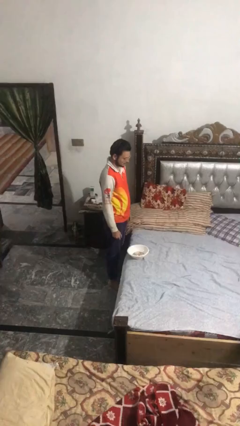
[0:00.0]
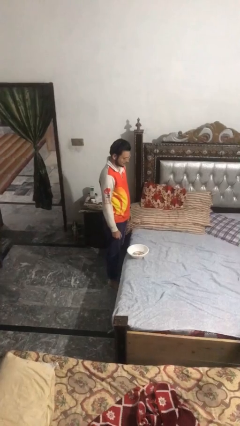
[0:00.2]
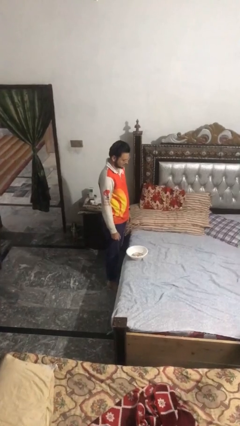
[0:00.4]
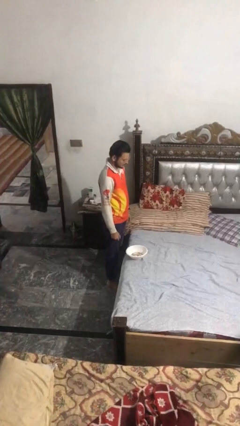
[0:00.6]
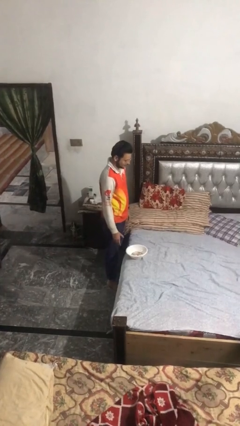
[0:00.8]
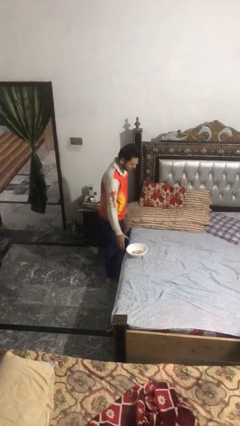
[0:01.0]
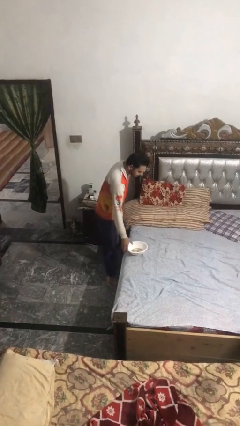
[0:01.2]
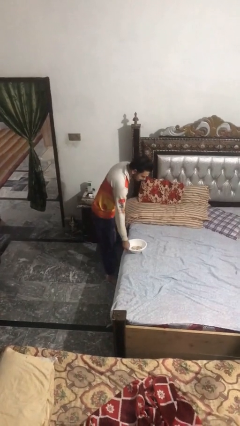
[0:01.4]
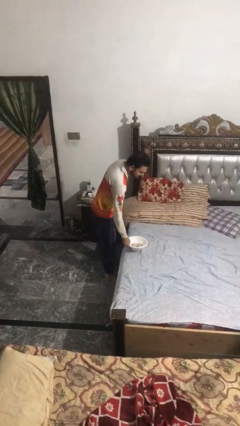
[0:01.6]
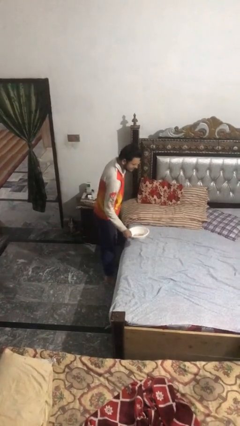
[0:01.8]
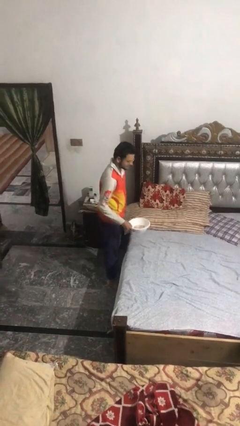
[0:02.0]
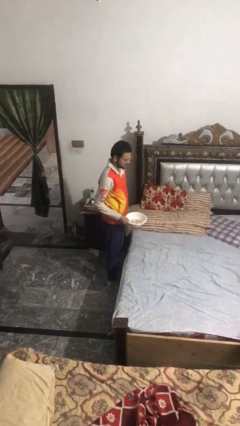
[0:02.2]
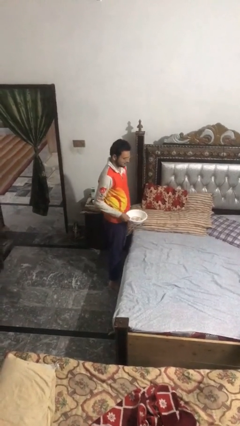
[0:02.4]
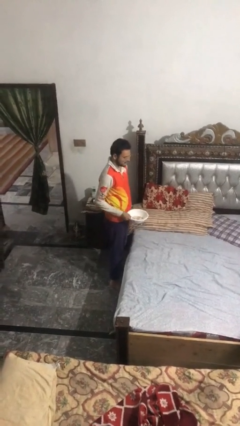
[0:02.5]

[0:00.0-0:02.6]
person picks up object from countertop

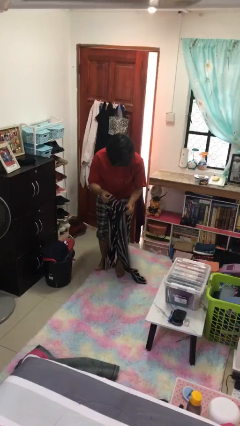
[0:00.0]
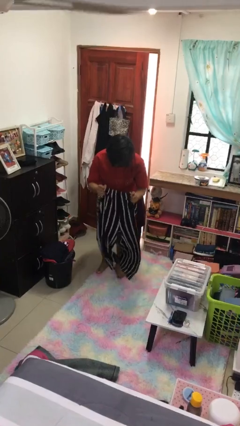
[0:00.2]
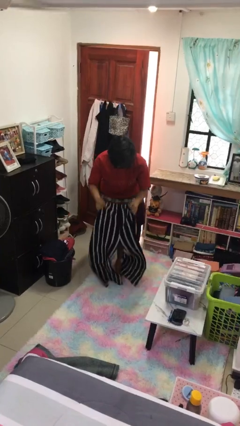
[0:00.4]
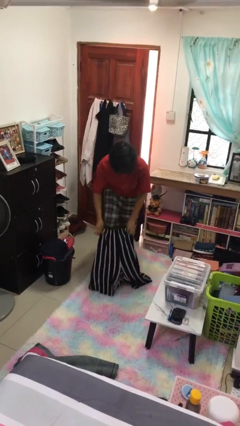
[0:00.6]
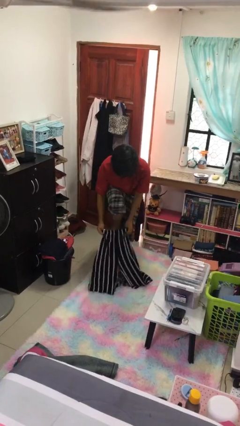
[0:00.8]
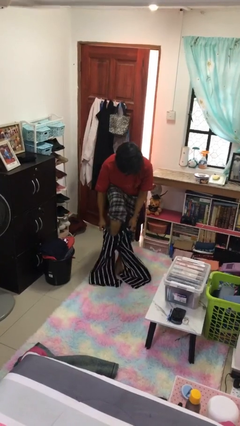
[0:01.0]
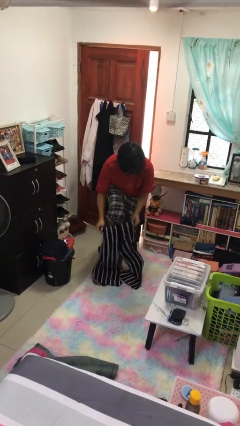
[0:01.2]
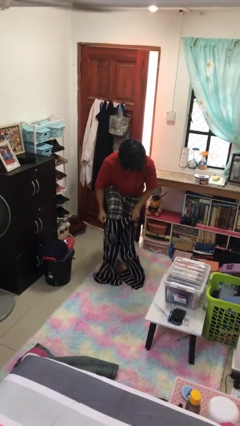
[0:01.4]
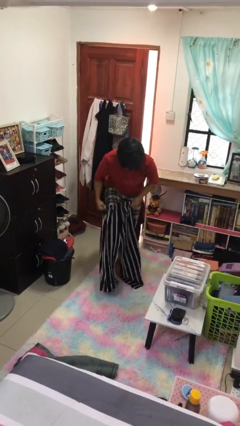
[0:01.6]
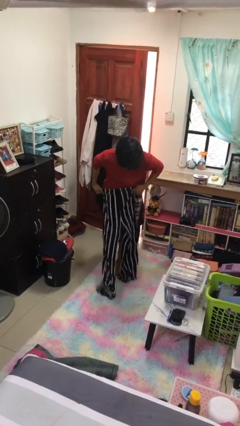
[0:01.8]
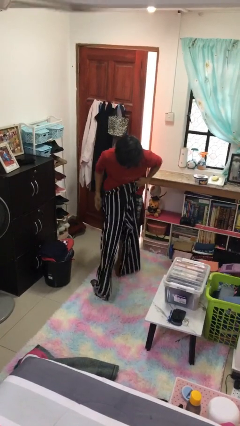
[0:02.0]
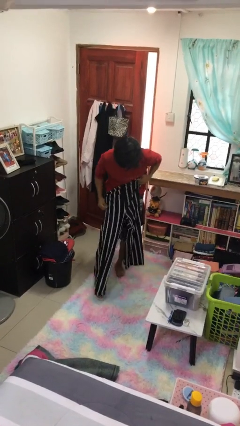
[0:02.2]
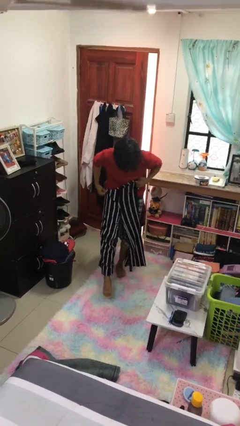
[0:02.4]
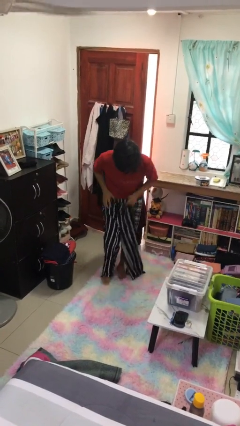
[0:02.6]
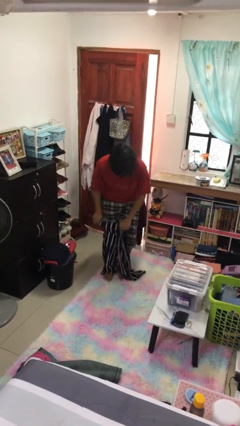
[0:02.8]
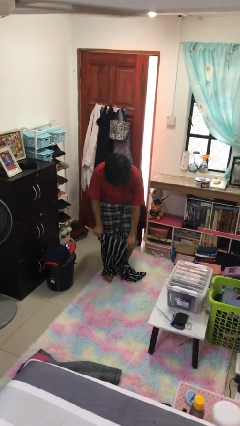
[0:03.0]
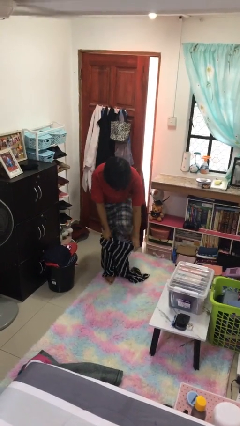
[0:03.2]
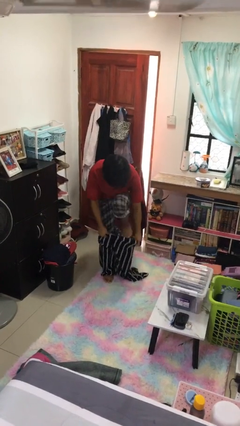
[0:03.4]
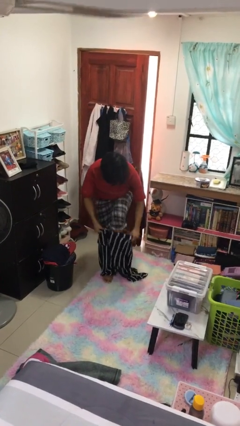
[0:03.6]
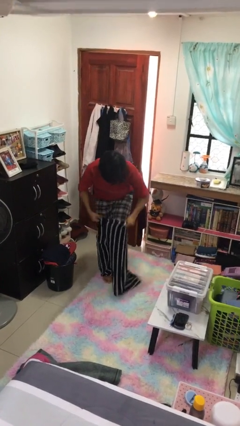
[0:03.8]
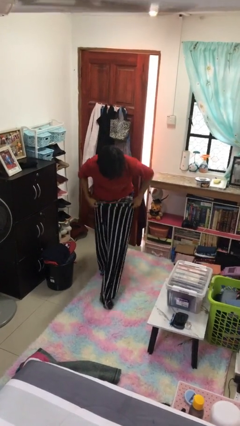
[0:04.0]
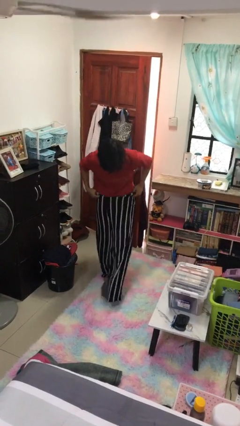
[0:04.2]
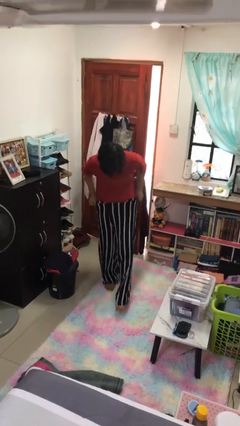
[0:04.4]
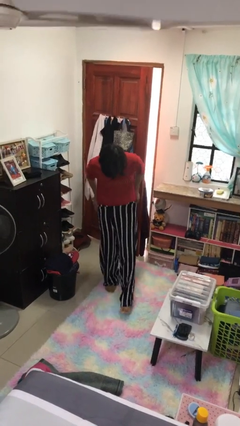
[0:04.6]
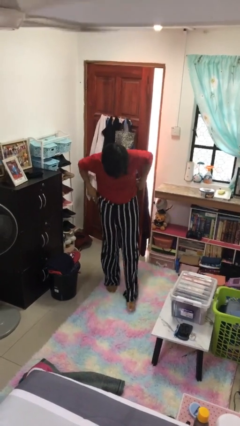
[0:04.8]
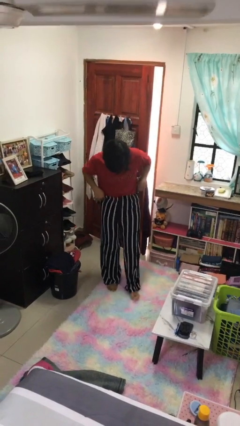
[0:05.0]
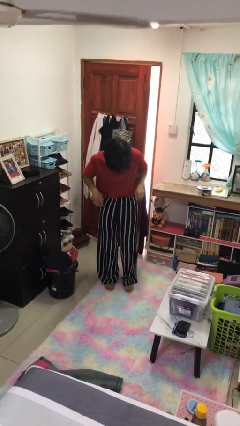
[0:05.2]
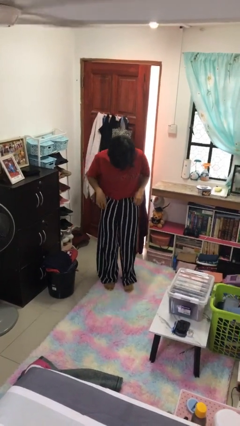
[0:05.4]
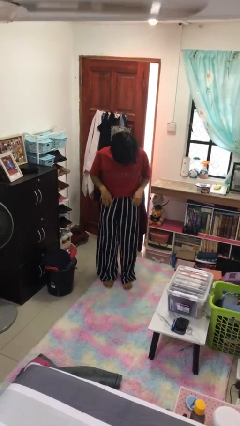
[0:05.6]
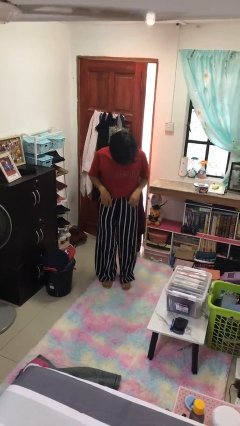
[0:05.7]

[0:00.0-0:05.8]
person puts on pants

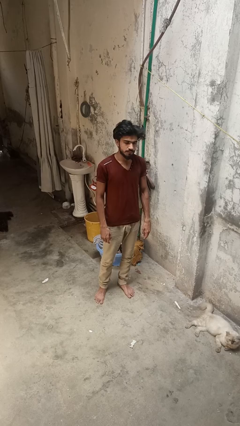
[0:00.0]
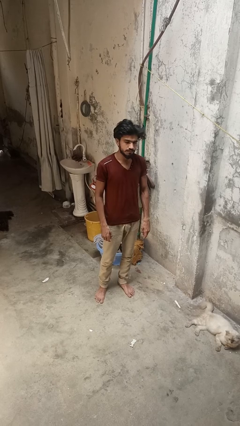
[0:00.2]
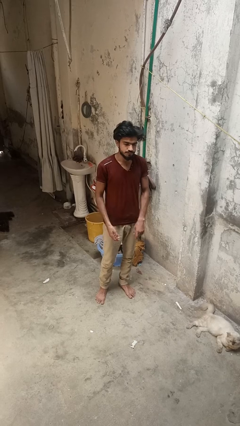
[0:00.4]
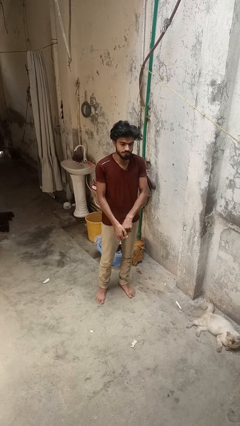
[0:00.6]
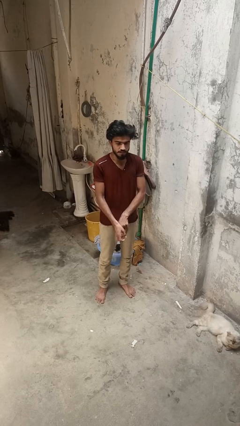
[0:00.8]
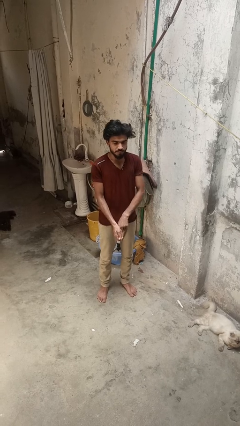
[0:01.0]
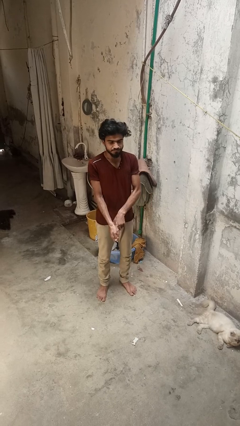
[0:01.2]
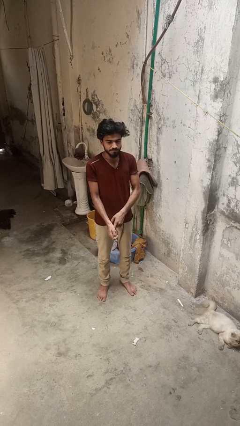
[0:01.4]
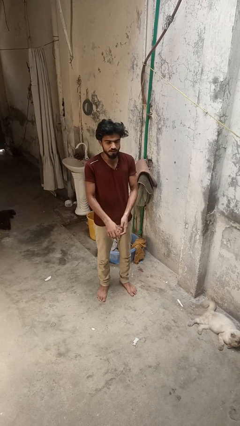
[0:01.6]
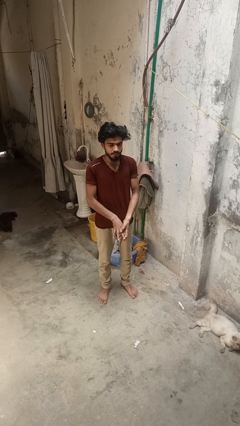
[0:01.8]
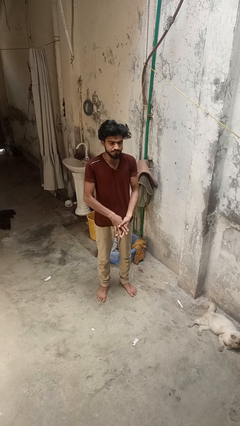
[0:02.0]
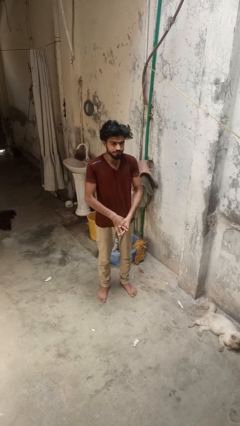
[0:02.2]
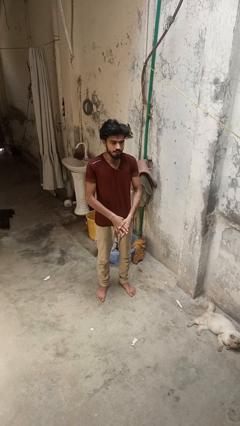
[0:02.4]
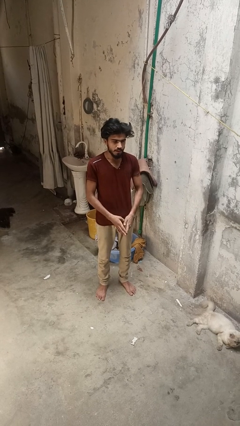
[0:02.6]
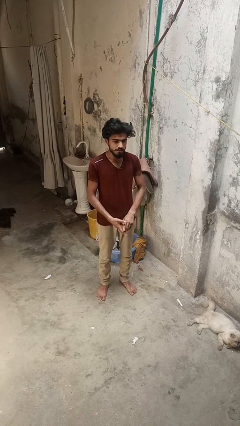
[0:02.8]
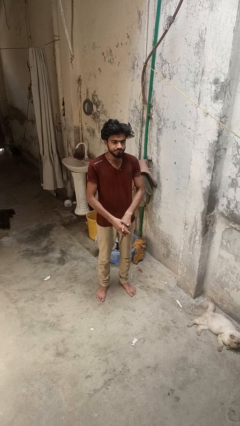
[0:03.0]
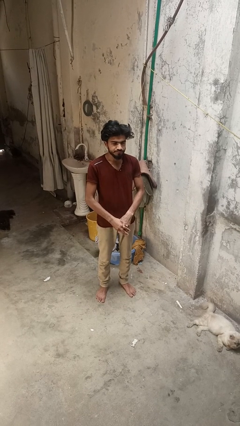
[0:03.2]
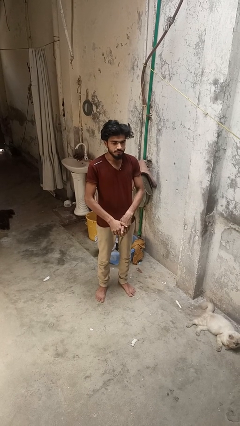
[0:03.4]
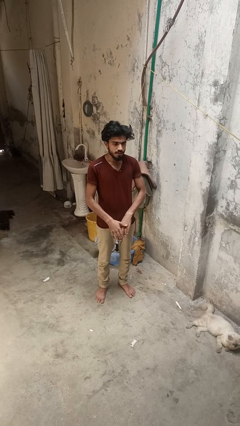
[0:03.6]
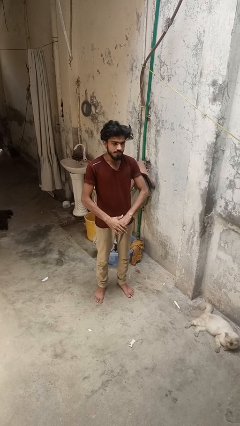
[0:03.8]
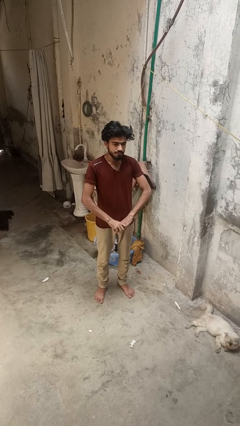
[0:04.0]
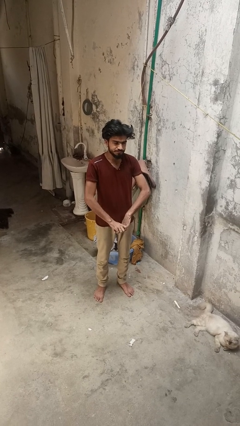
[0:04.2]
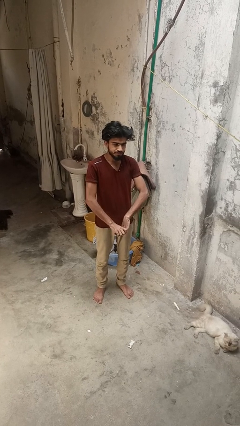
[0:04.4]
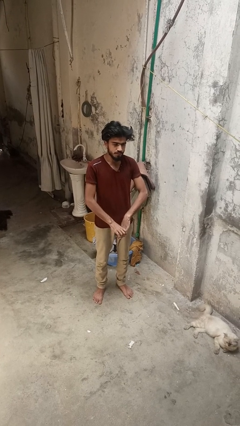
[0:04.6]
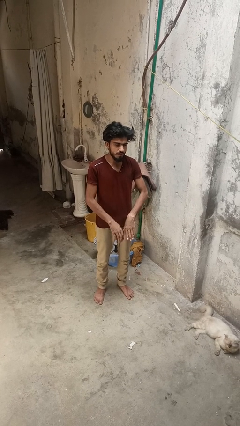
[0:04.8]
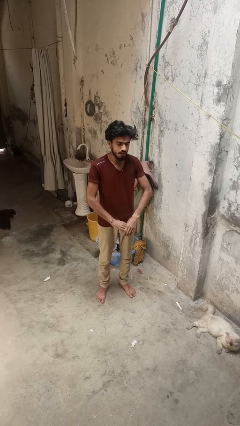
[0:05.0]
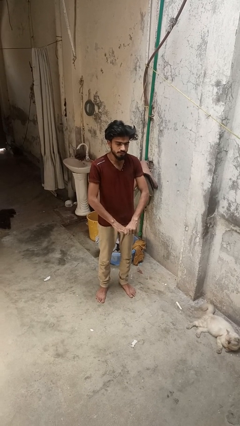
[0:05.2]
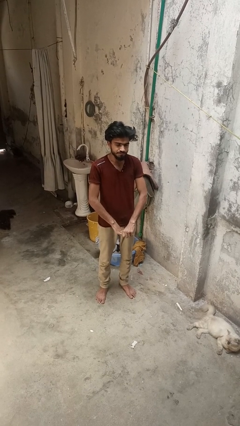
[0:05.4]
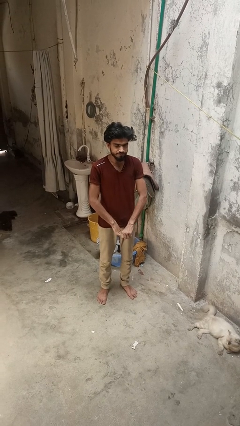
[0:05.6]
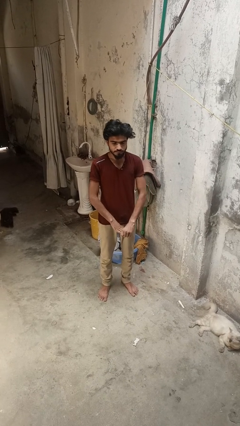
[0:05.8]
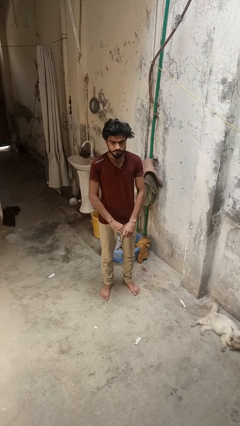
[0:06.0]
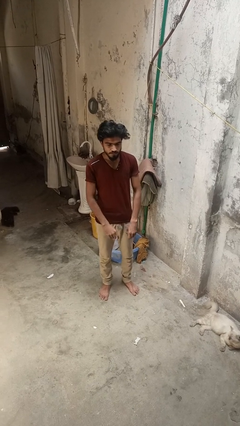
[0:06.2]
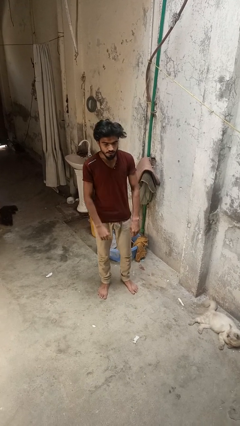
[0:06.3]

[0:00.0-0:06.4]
person cracks knuckles

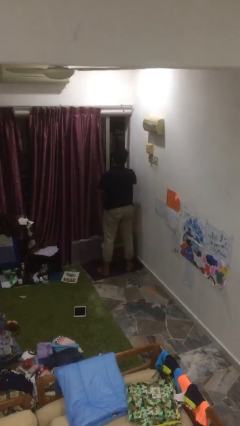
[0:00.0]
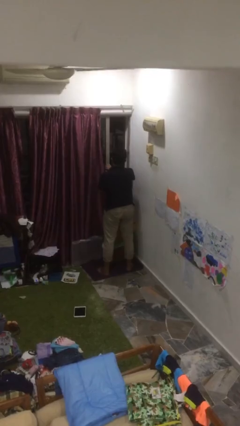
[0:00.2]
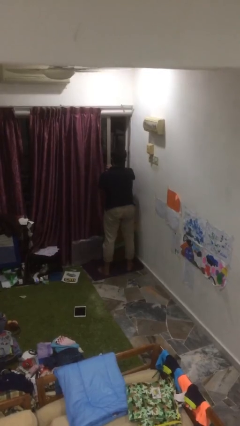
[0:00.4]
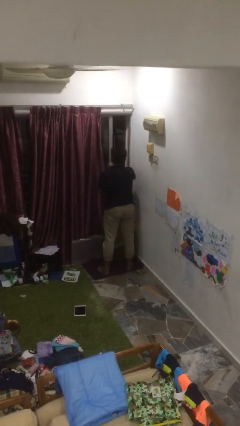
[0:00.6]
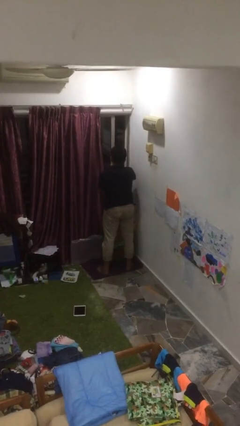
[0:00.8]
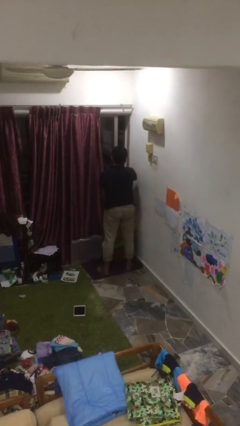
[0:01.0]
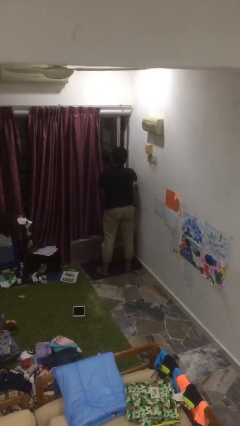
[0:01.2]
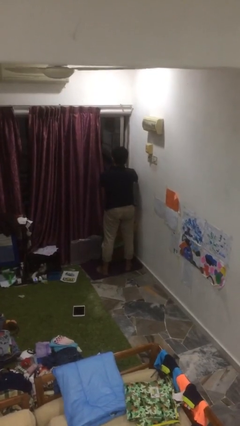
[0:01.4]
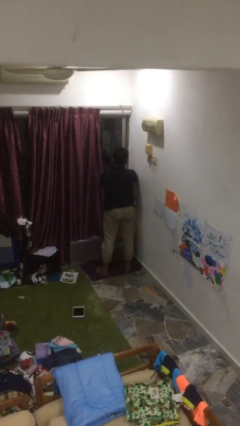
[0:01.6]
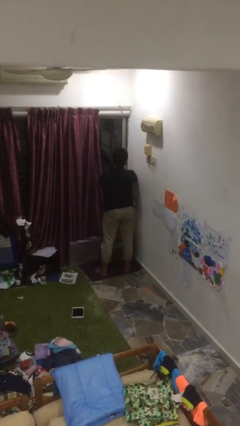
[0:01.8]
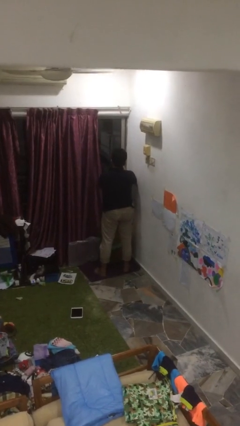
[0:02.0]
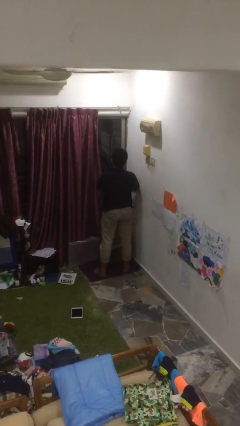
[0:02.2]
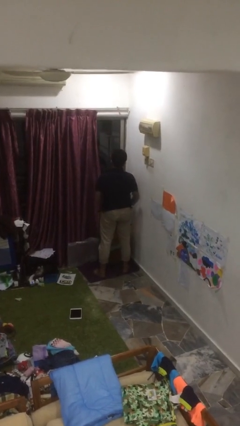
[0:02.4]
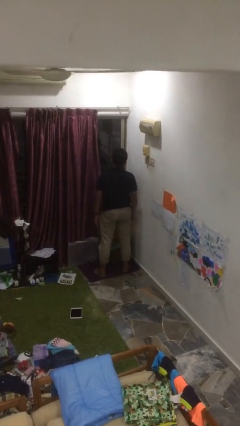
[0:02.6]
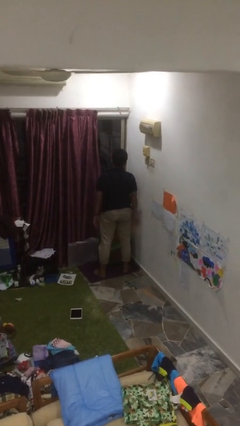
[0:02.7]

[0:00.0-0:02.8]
person closes home window
